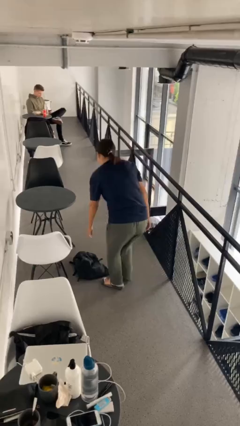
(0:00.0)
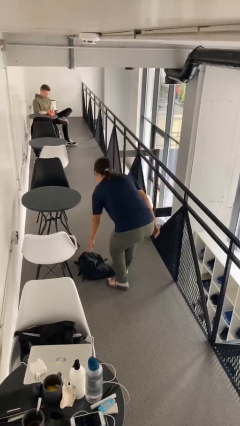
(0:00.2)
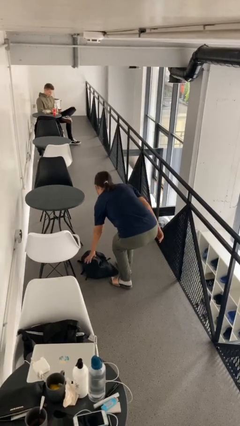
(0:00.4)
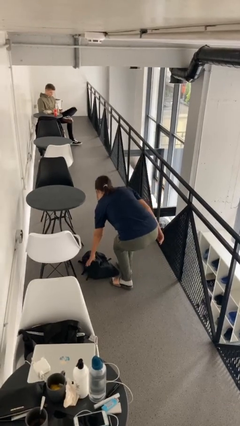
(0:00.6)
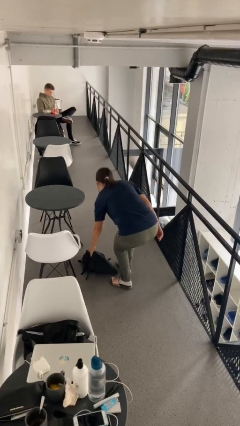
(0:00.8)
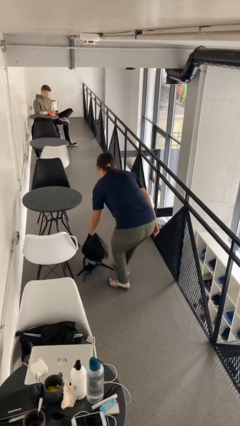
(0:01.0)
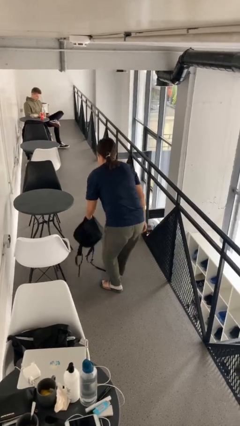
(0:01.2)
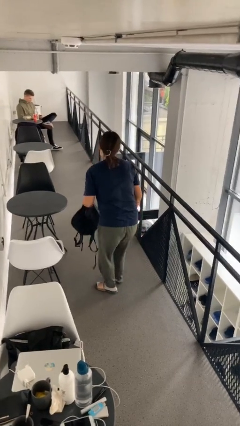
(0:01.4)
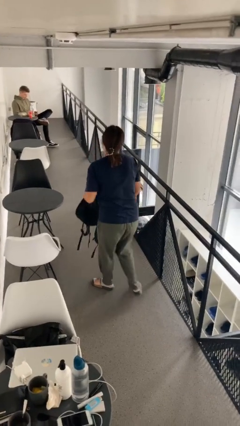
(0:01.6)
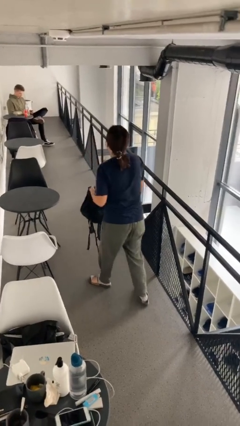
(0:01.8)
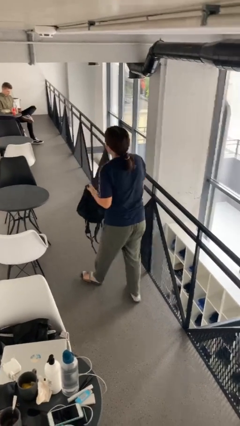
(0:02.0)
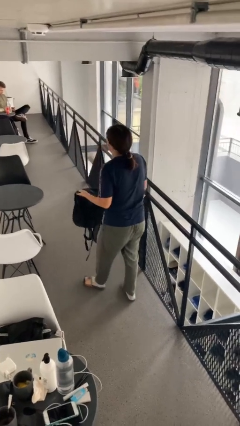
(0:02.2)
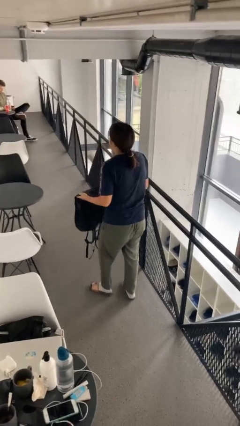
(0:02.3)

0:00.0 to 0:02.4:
person picks up object from floor

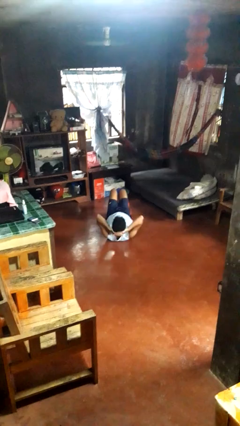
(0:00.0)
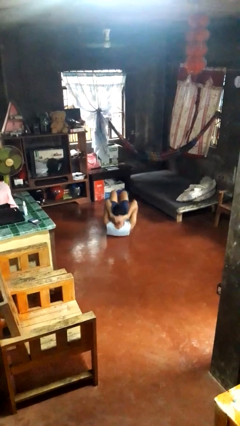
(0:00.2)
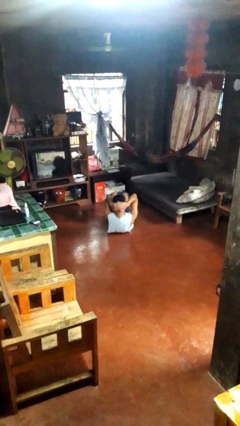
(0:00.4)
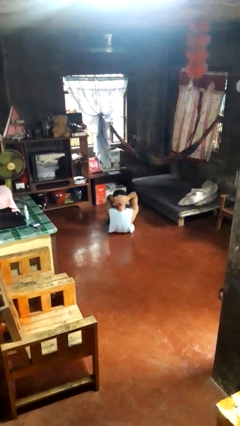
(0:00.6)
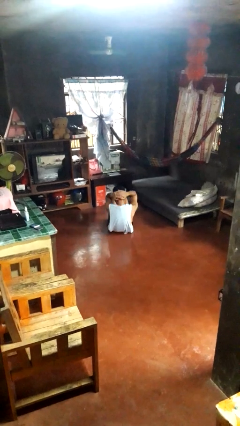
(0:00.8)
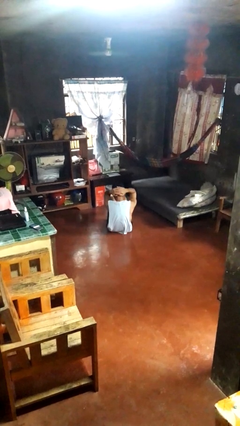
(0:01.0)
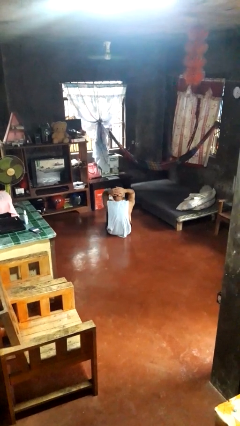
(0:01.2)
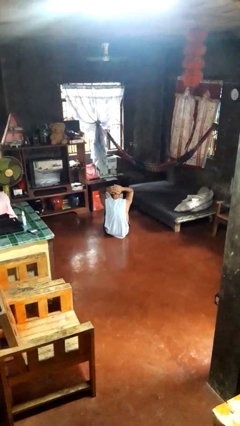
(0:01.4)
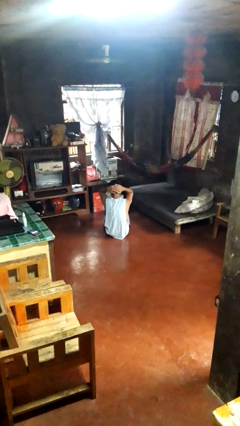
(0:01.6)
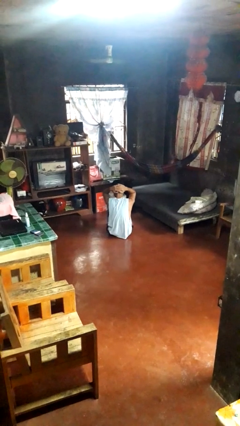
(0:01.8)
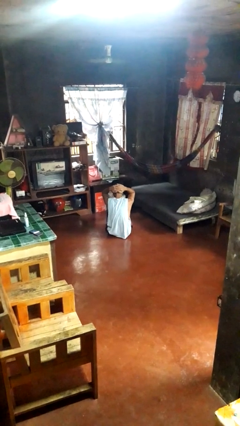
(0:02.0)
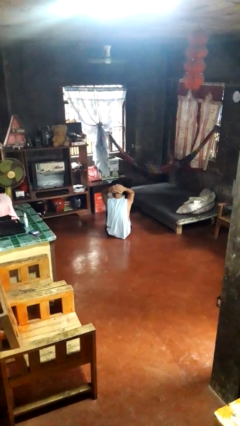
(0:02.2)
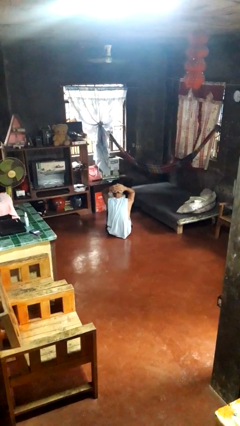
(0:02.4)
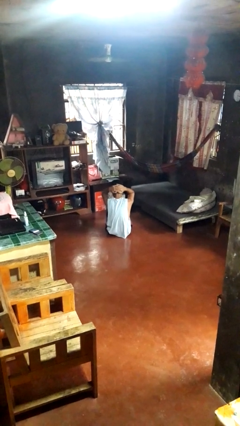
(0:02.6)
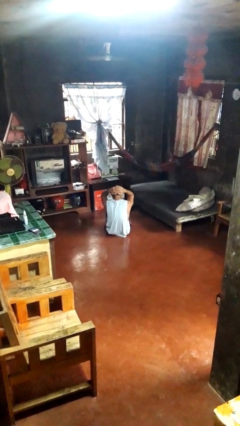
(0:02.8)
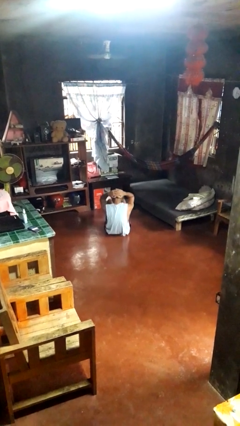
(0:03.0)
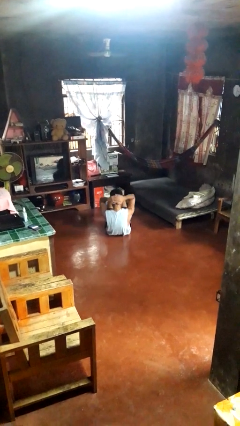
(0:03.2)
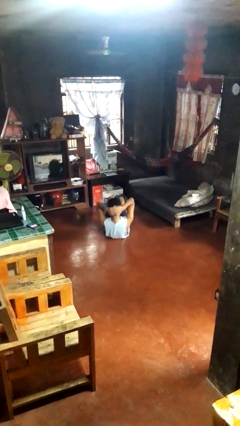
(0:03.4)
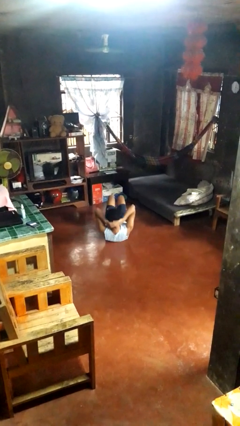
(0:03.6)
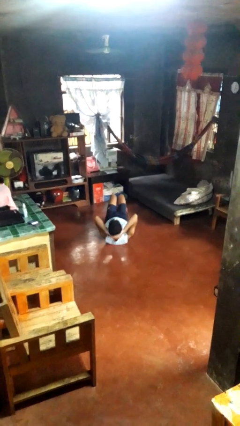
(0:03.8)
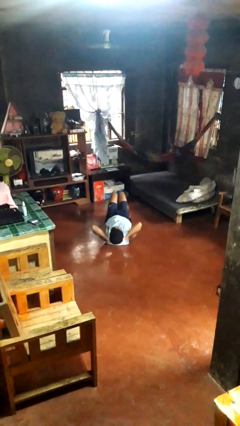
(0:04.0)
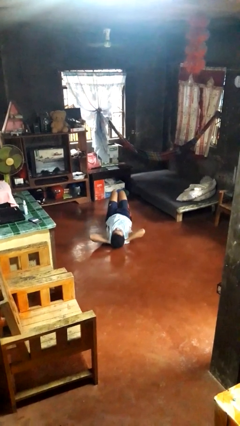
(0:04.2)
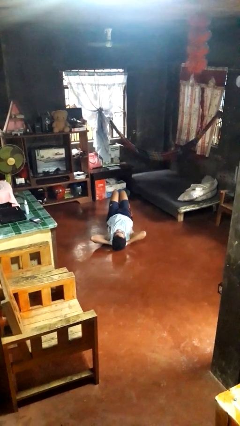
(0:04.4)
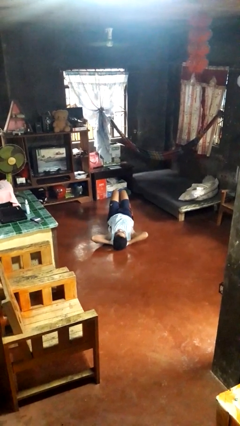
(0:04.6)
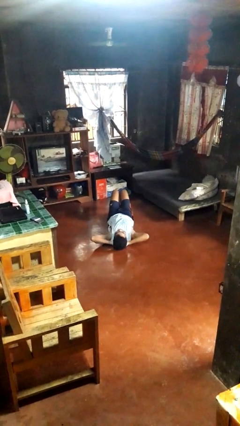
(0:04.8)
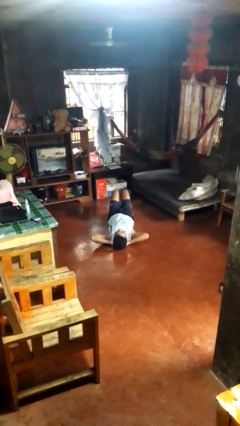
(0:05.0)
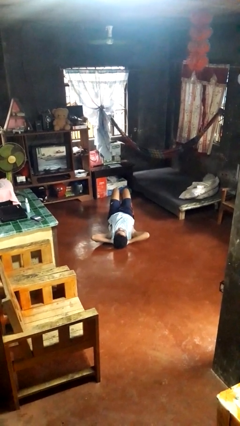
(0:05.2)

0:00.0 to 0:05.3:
person exercises with situp

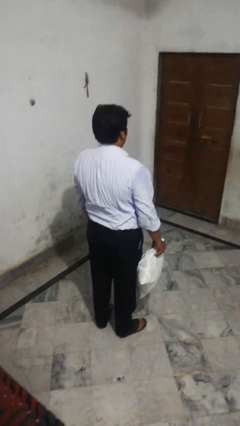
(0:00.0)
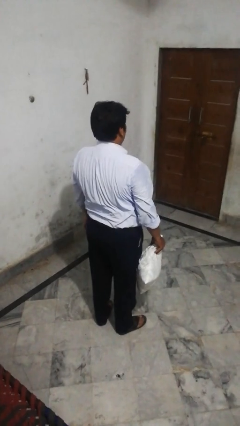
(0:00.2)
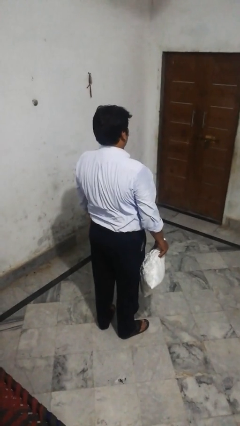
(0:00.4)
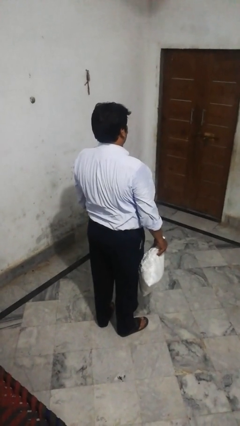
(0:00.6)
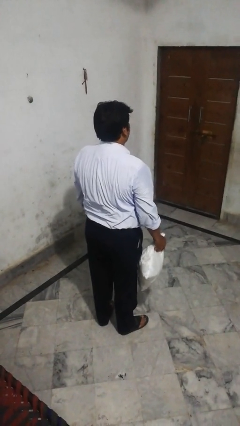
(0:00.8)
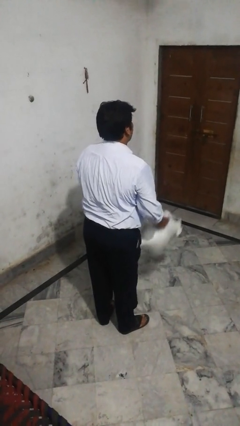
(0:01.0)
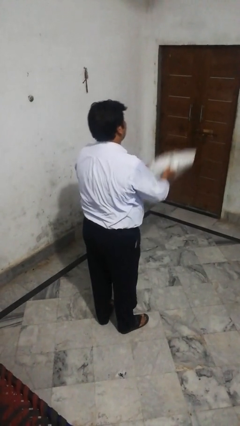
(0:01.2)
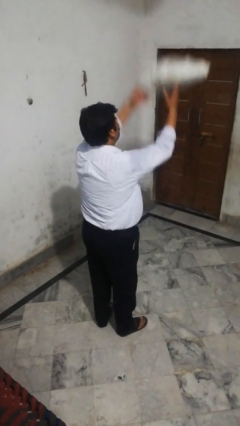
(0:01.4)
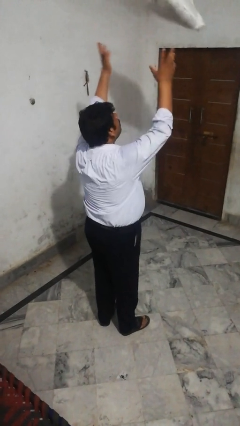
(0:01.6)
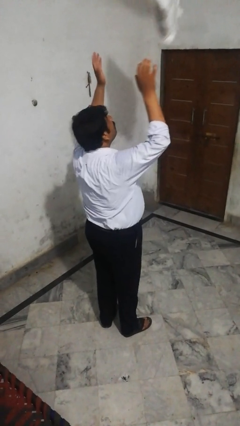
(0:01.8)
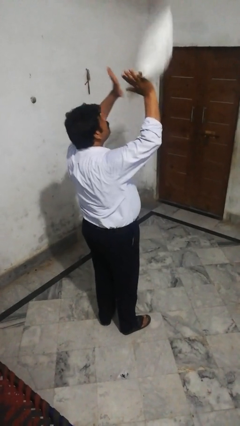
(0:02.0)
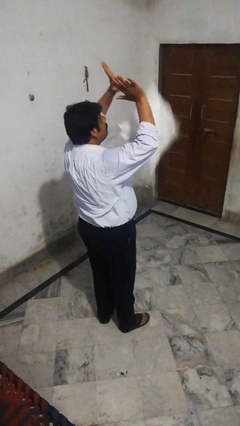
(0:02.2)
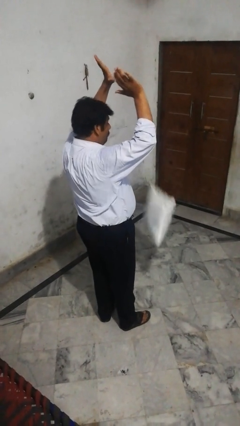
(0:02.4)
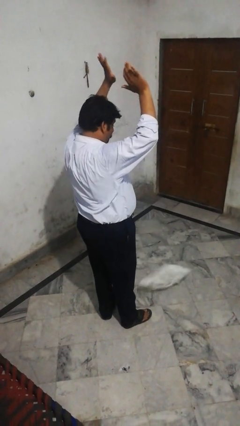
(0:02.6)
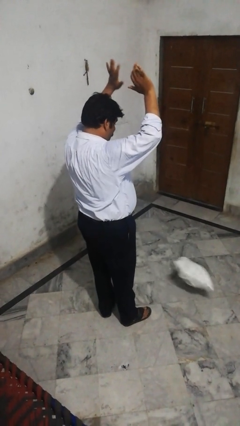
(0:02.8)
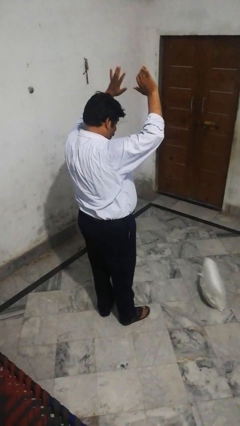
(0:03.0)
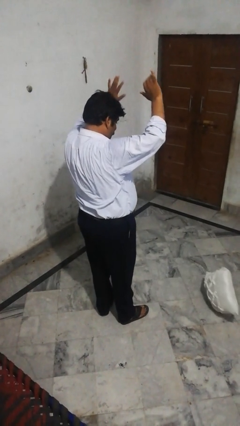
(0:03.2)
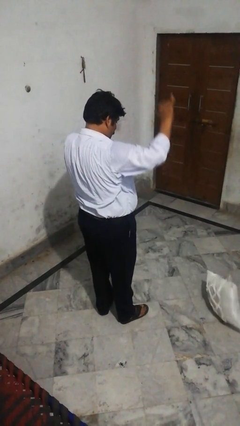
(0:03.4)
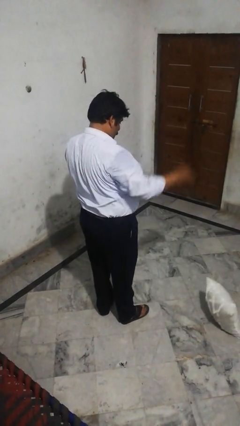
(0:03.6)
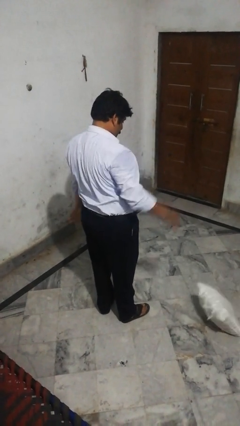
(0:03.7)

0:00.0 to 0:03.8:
person throws object into air

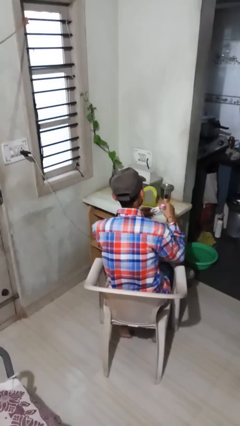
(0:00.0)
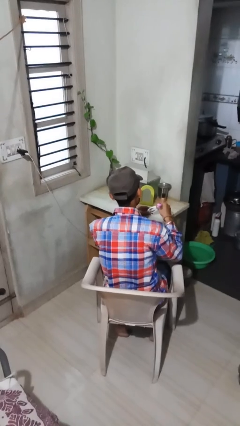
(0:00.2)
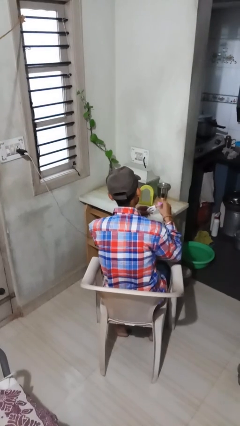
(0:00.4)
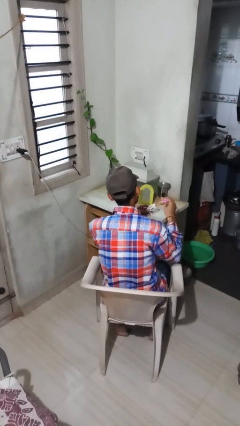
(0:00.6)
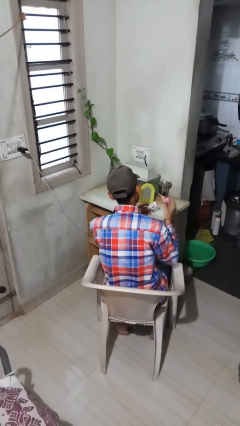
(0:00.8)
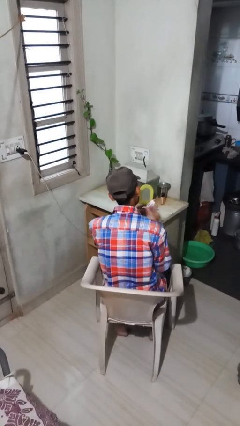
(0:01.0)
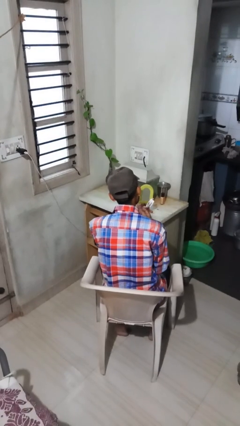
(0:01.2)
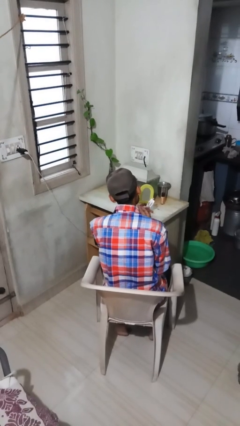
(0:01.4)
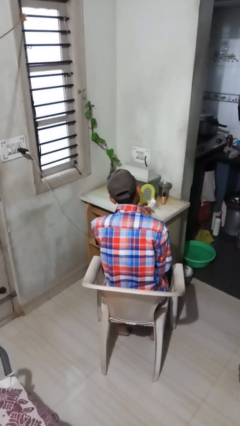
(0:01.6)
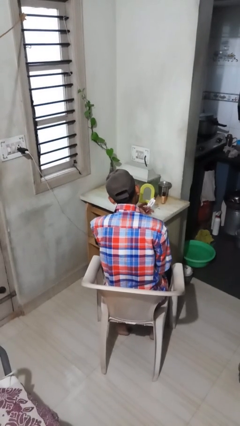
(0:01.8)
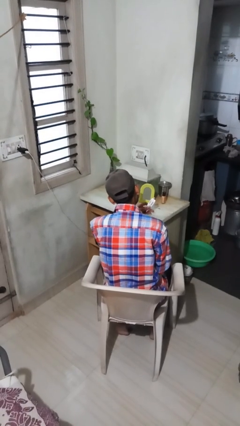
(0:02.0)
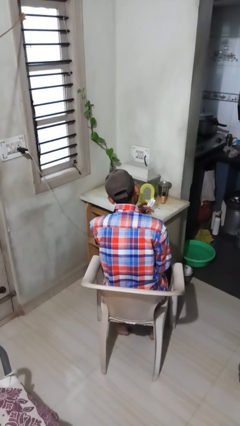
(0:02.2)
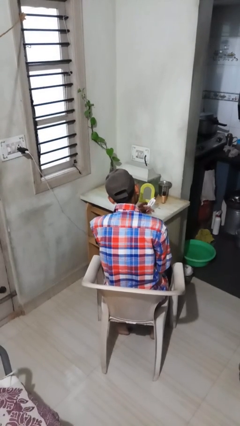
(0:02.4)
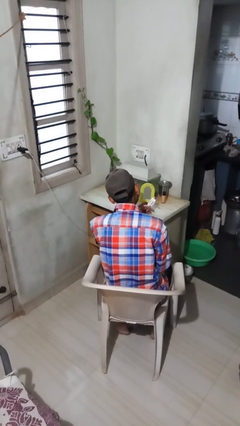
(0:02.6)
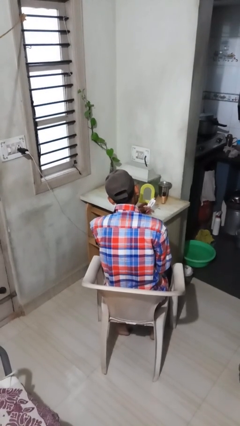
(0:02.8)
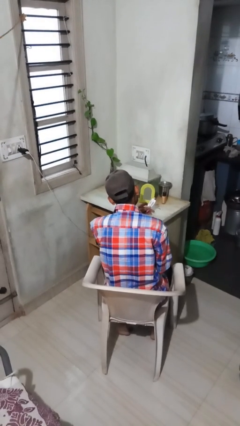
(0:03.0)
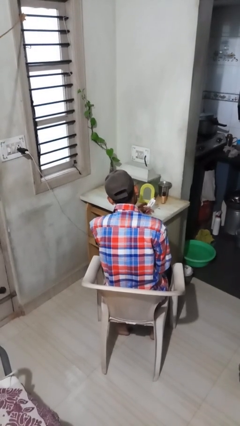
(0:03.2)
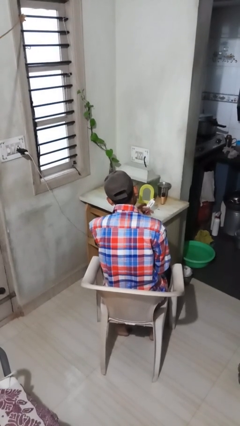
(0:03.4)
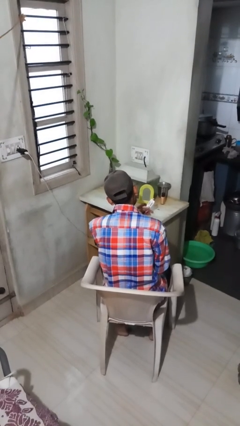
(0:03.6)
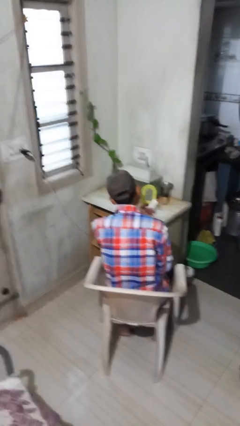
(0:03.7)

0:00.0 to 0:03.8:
person applies lip makeup

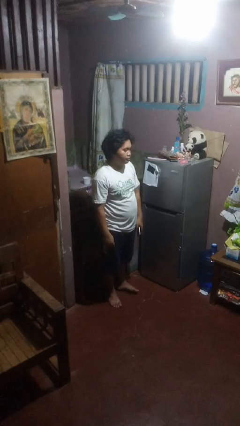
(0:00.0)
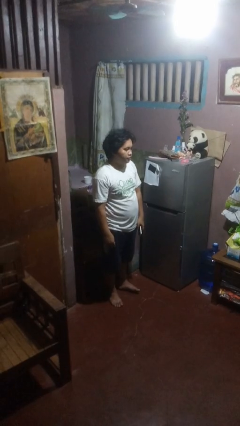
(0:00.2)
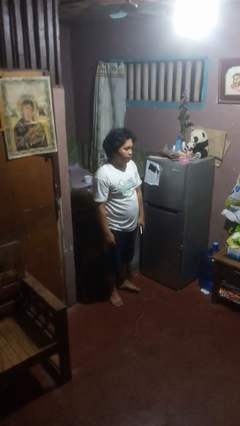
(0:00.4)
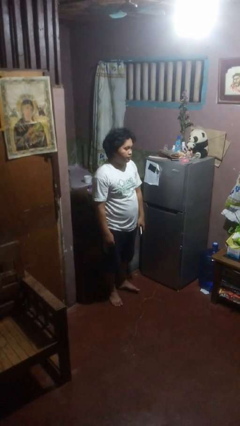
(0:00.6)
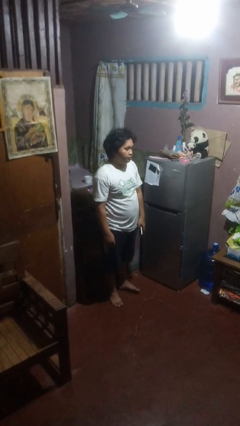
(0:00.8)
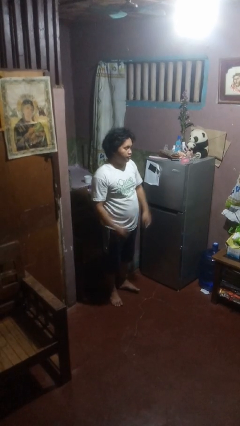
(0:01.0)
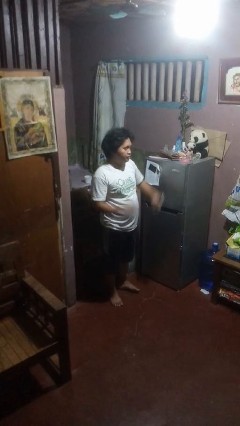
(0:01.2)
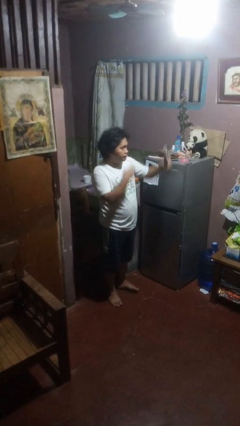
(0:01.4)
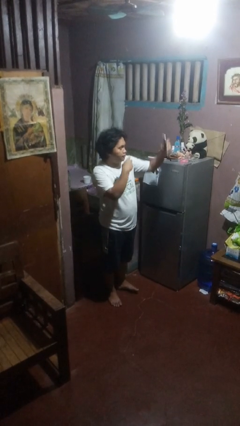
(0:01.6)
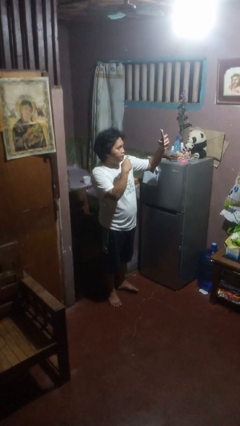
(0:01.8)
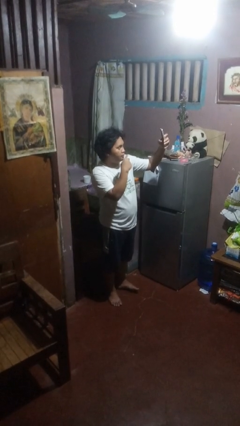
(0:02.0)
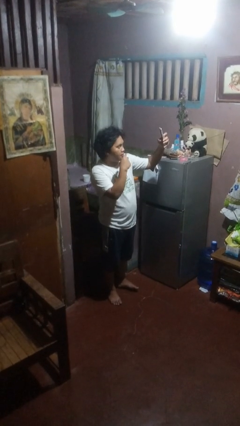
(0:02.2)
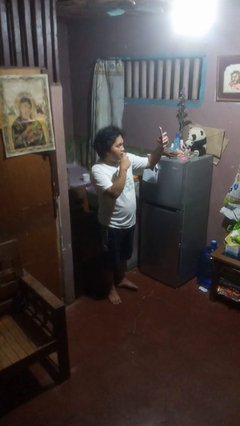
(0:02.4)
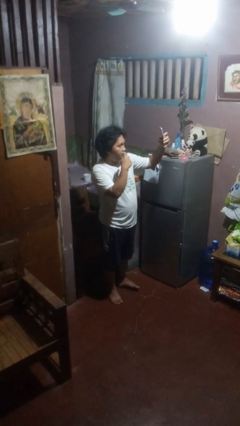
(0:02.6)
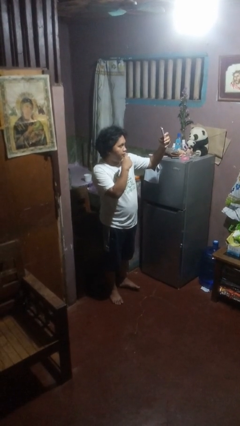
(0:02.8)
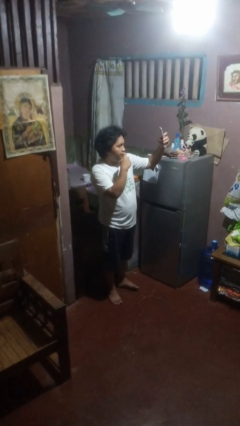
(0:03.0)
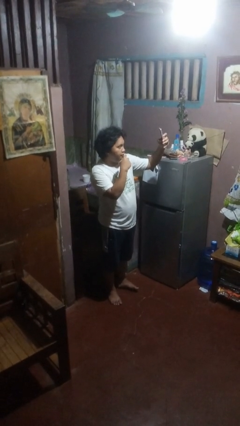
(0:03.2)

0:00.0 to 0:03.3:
person takes selfie
